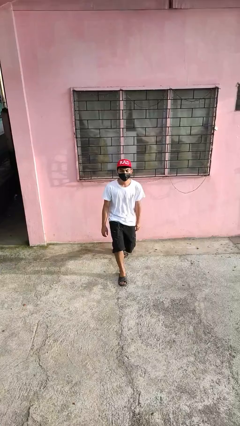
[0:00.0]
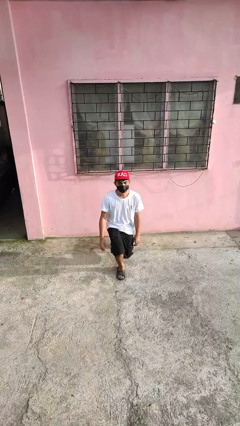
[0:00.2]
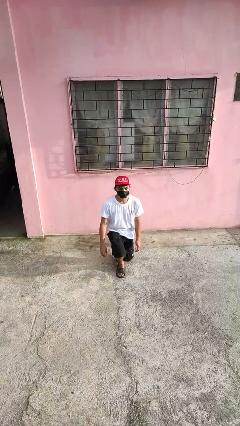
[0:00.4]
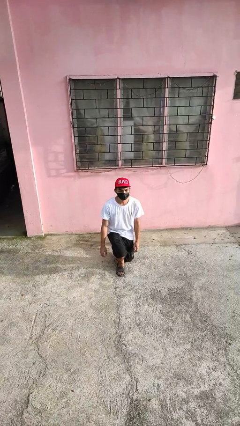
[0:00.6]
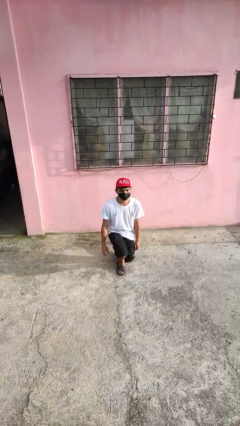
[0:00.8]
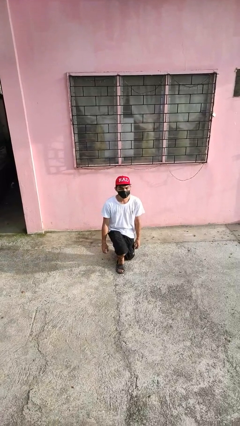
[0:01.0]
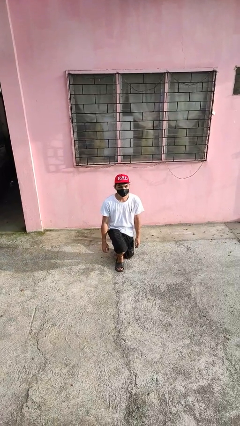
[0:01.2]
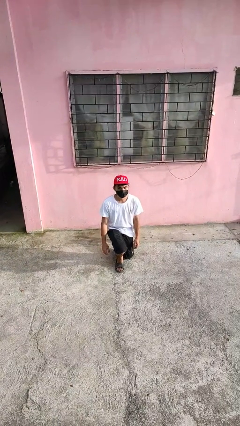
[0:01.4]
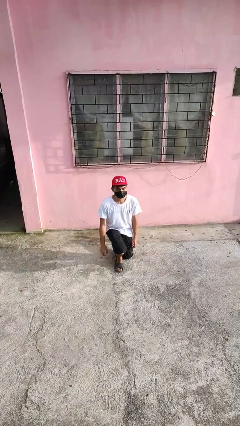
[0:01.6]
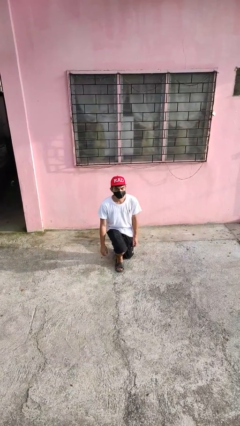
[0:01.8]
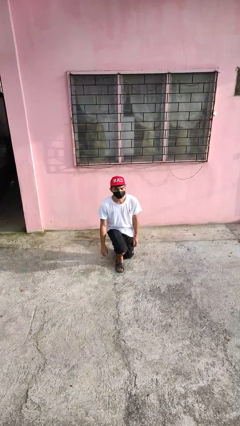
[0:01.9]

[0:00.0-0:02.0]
person kneels

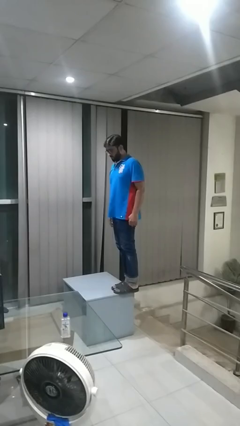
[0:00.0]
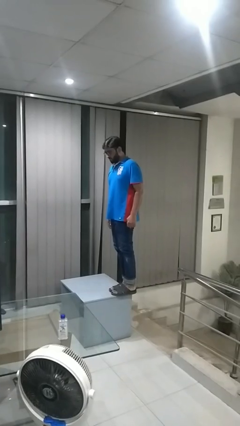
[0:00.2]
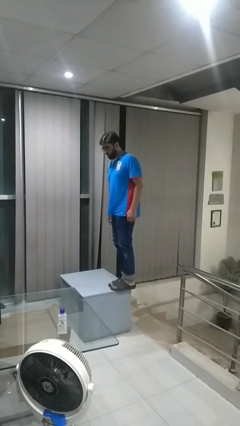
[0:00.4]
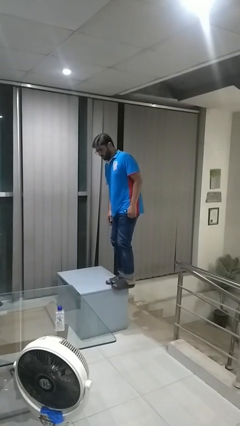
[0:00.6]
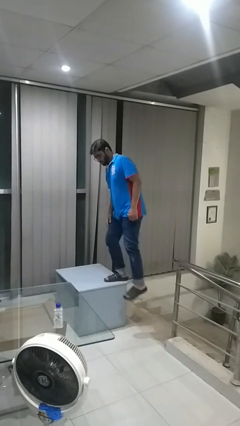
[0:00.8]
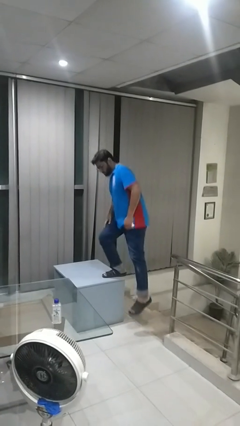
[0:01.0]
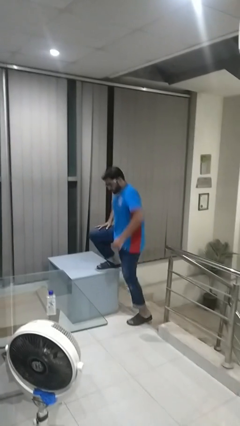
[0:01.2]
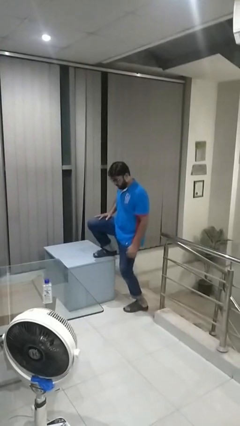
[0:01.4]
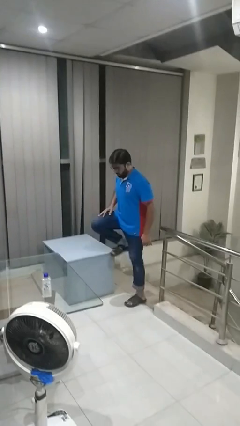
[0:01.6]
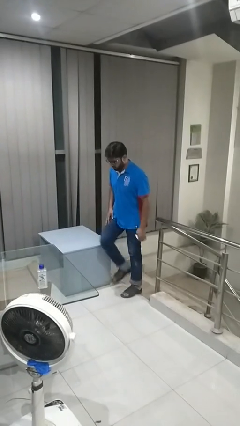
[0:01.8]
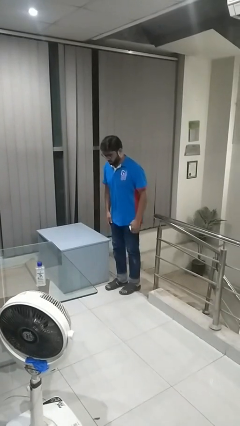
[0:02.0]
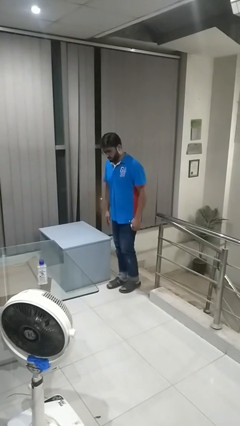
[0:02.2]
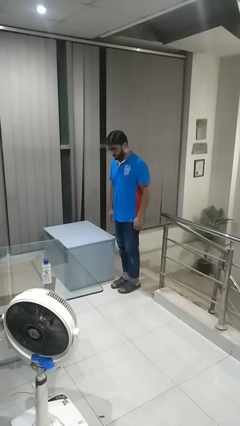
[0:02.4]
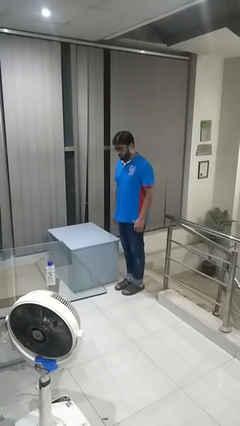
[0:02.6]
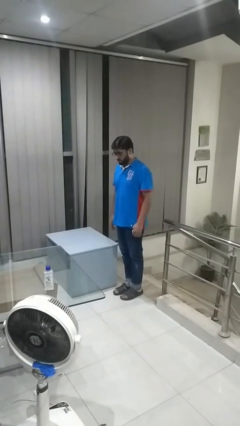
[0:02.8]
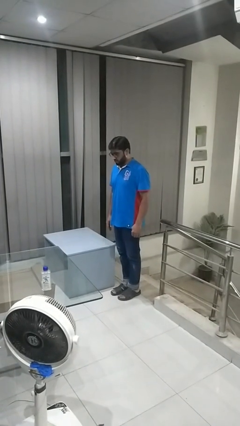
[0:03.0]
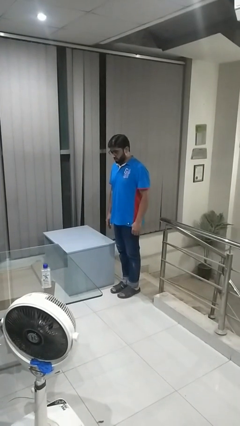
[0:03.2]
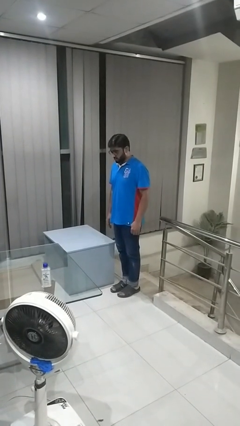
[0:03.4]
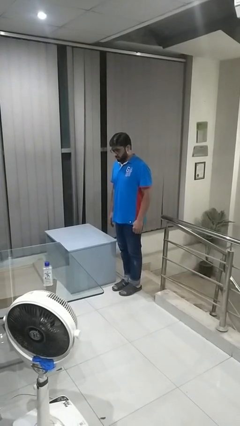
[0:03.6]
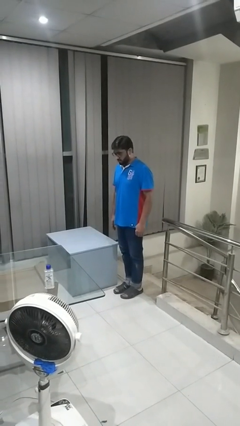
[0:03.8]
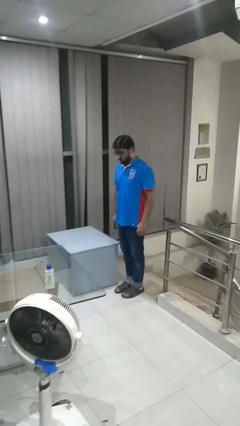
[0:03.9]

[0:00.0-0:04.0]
person climbs off table

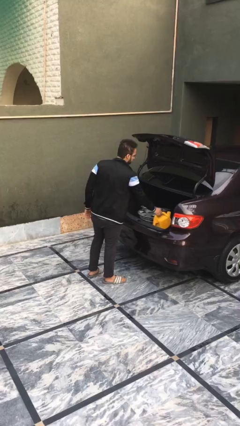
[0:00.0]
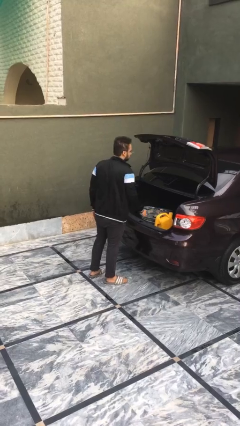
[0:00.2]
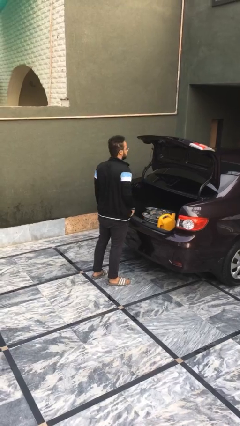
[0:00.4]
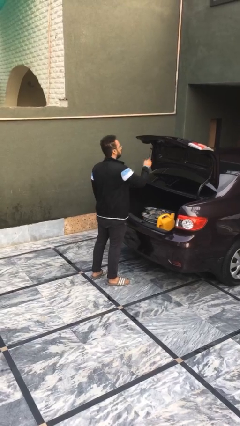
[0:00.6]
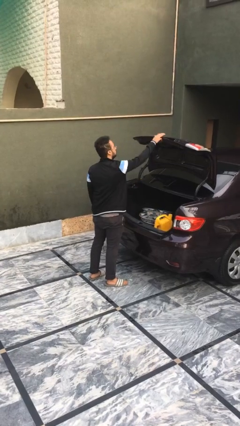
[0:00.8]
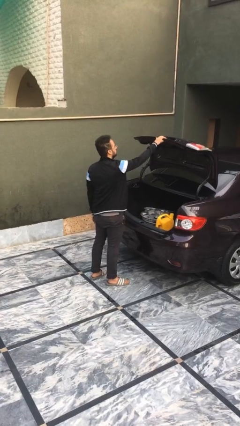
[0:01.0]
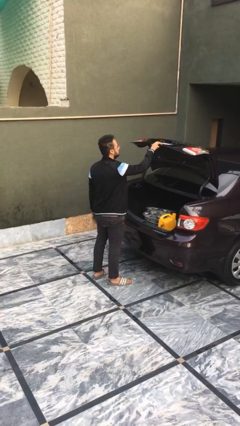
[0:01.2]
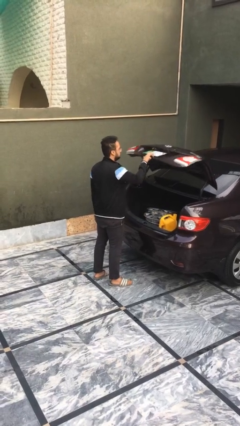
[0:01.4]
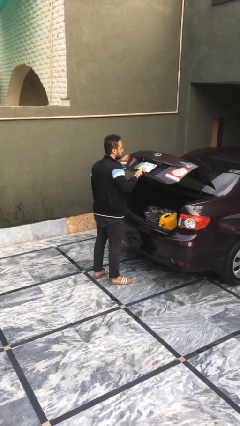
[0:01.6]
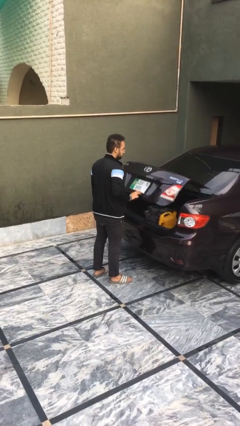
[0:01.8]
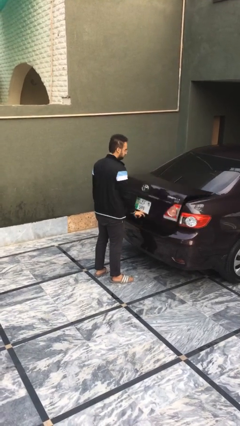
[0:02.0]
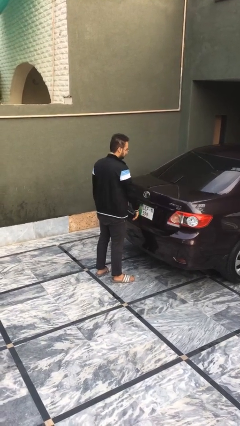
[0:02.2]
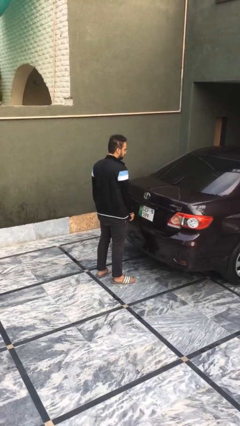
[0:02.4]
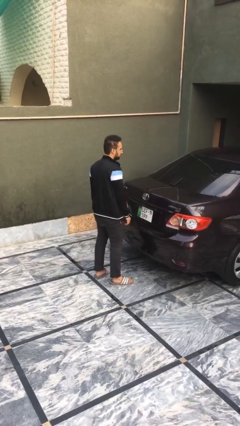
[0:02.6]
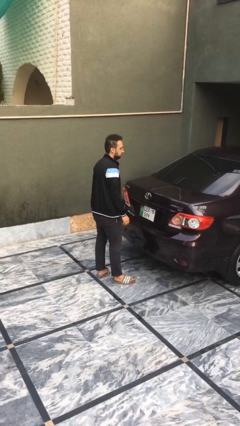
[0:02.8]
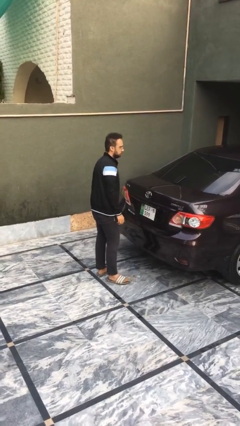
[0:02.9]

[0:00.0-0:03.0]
person closes car trunk

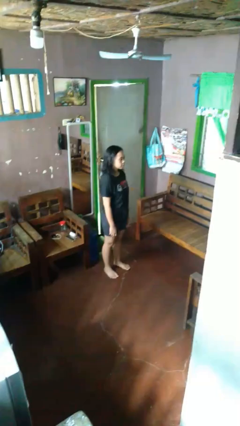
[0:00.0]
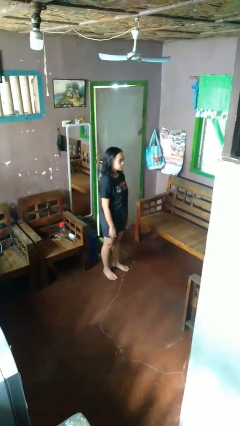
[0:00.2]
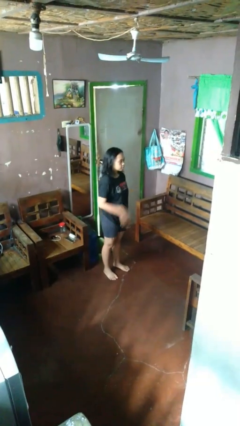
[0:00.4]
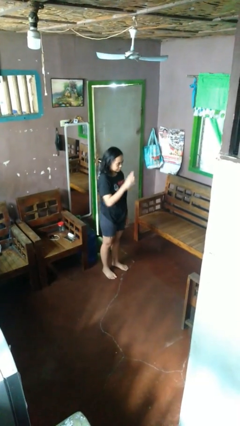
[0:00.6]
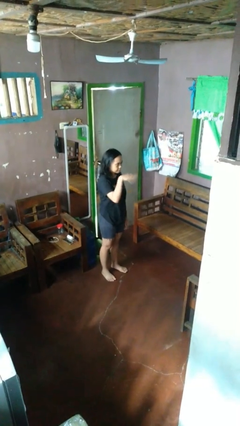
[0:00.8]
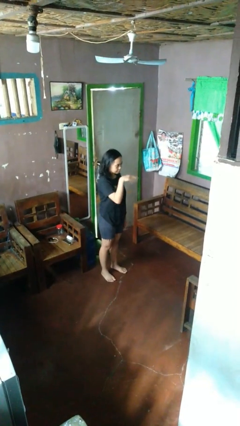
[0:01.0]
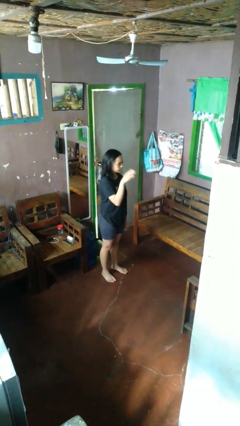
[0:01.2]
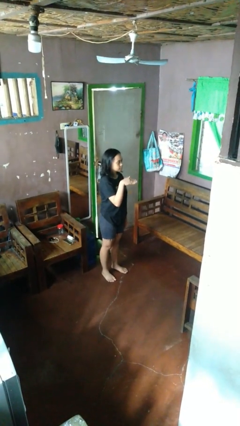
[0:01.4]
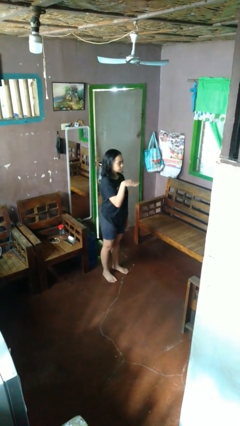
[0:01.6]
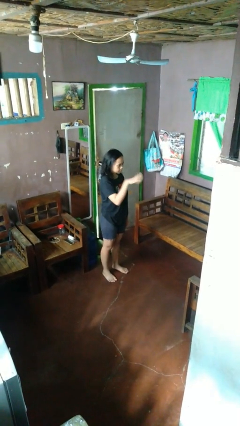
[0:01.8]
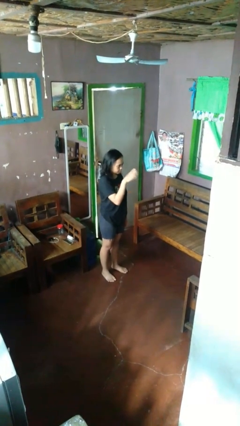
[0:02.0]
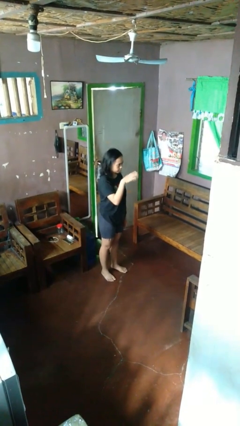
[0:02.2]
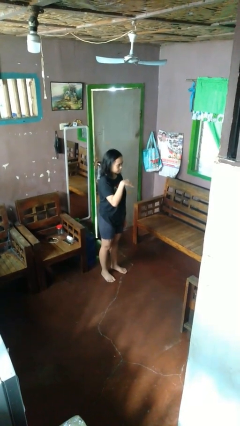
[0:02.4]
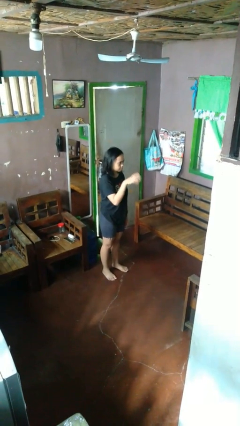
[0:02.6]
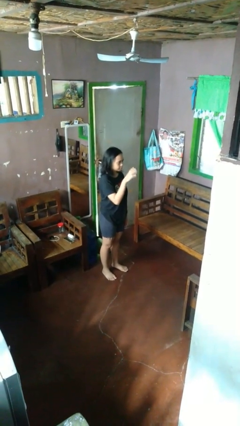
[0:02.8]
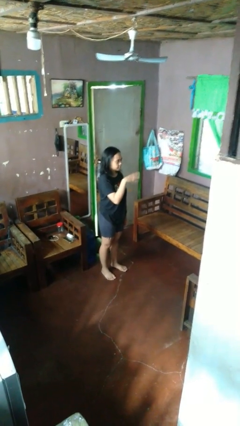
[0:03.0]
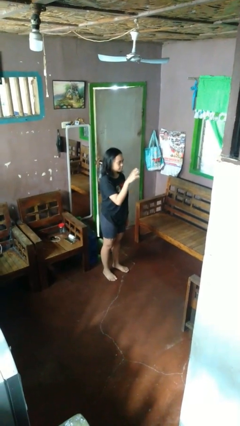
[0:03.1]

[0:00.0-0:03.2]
person gestures come here

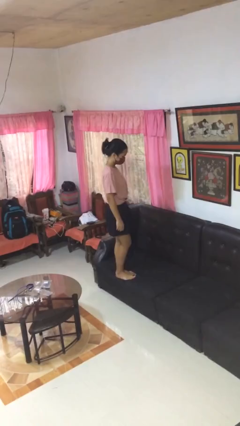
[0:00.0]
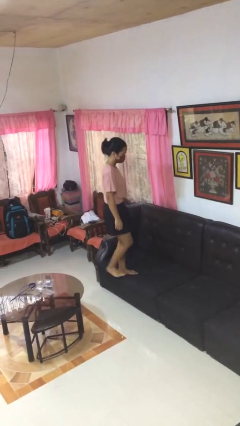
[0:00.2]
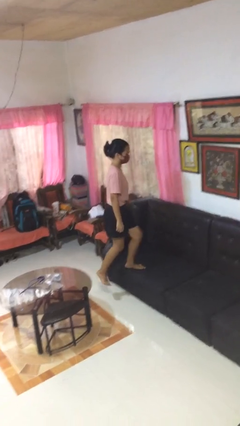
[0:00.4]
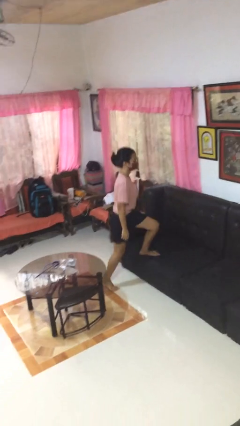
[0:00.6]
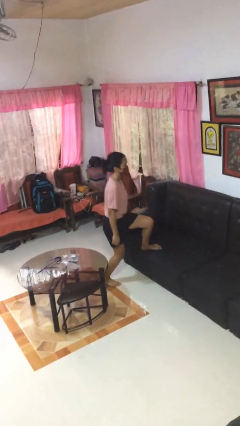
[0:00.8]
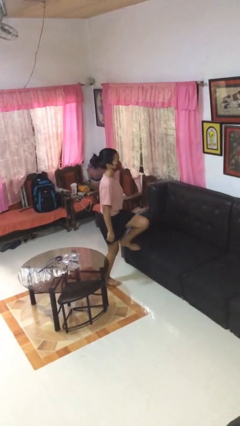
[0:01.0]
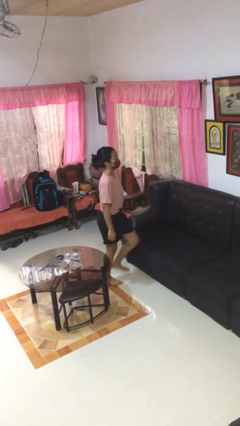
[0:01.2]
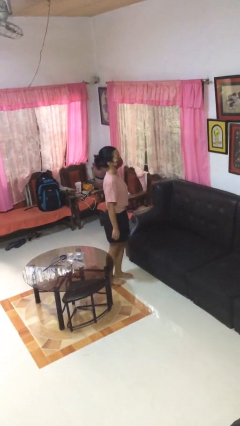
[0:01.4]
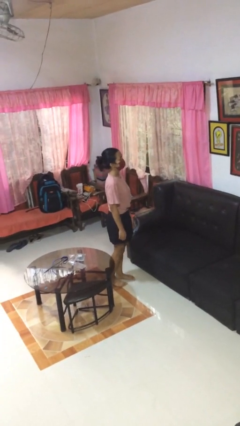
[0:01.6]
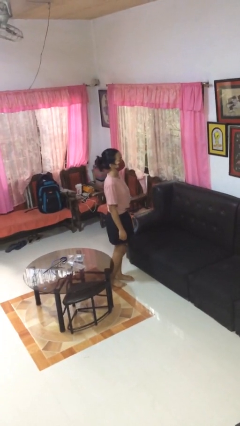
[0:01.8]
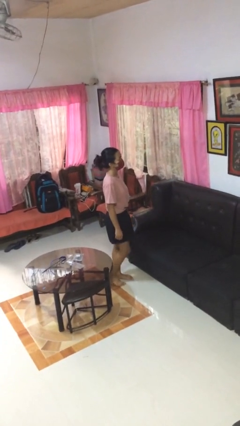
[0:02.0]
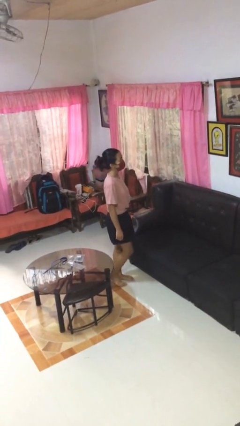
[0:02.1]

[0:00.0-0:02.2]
person climbs off couch

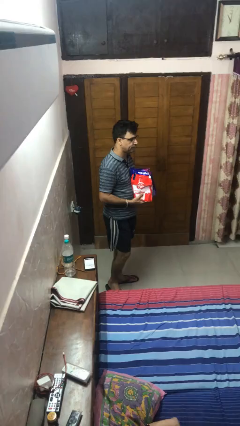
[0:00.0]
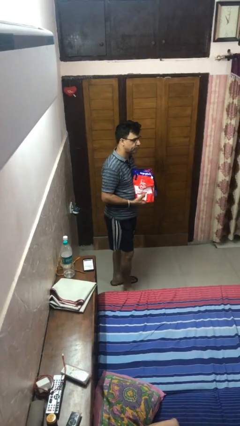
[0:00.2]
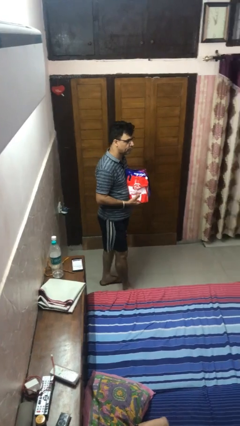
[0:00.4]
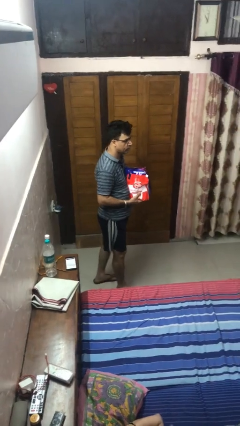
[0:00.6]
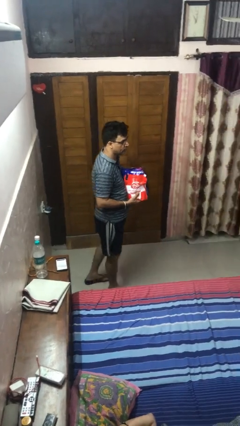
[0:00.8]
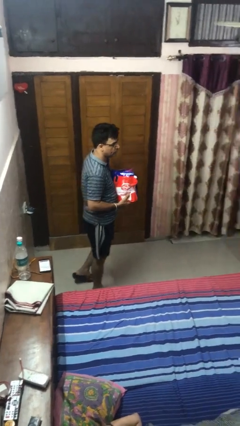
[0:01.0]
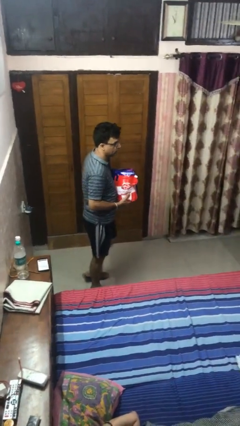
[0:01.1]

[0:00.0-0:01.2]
person carries groceries

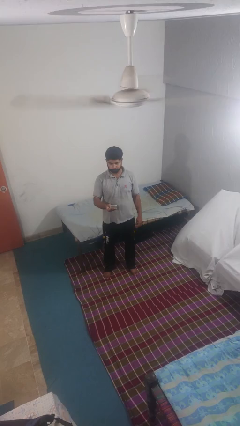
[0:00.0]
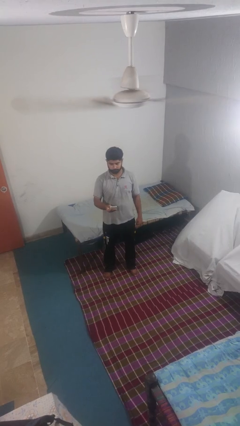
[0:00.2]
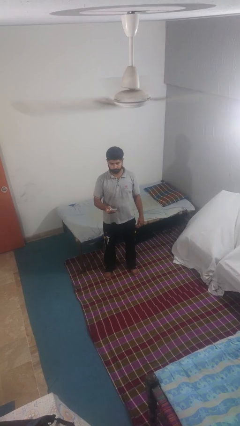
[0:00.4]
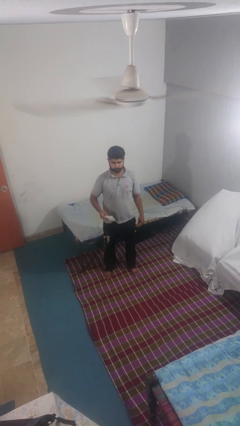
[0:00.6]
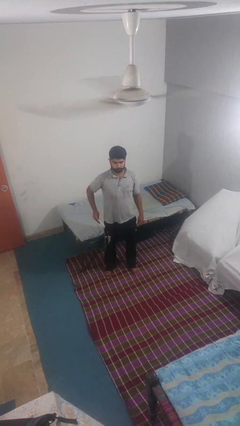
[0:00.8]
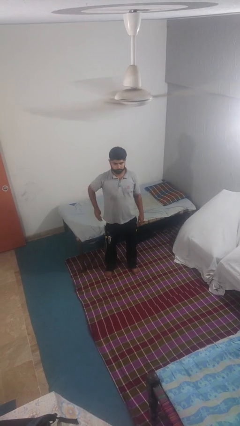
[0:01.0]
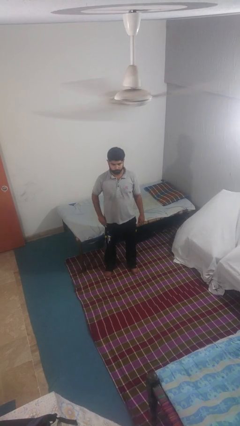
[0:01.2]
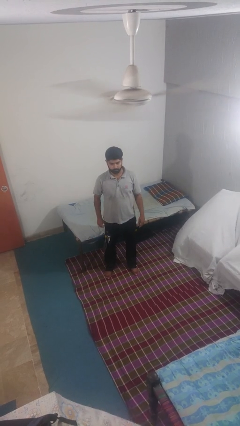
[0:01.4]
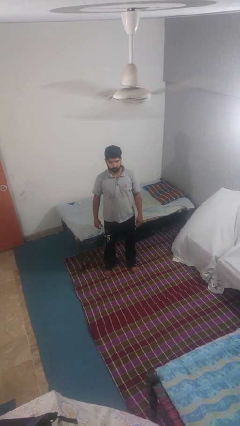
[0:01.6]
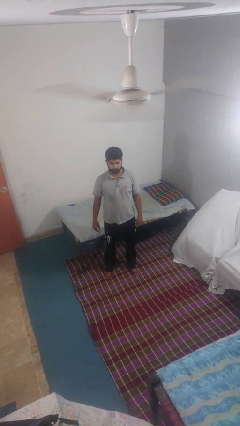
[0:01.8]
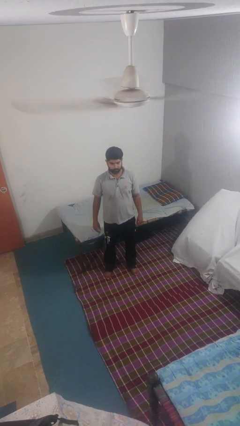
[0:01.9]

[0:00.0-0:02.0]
person puts phone into pocket

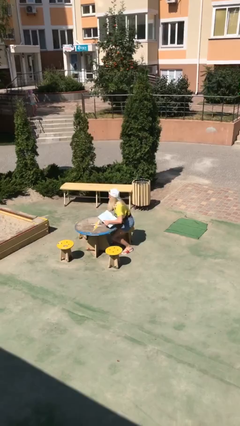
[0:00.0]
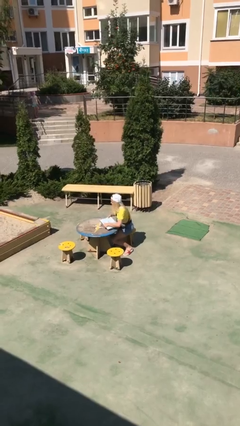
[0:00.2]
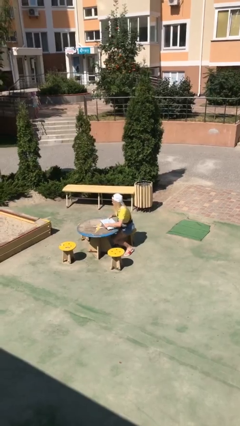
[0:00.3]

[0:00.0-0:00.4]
person sits down